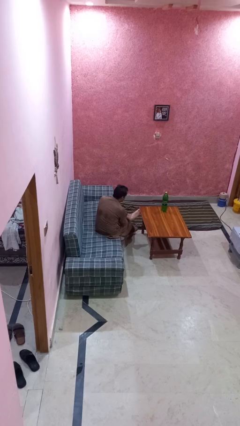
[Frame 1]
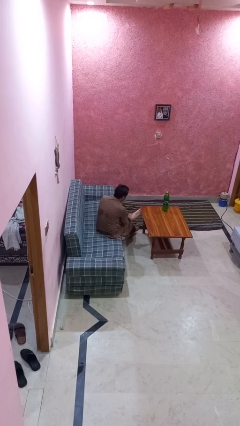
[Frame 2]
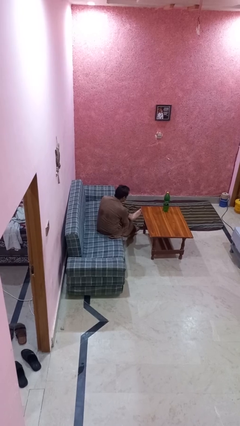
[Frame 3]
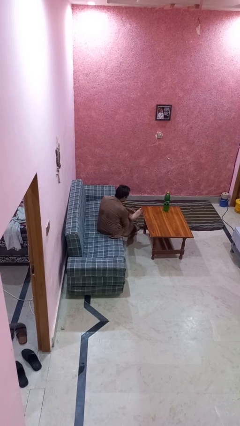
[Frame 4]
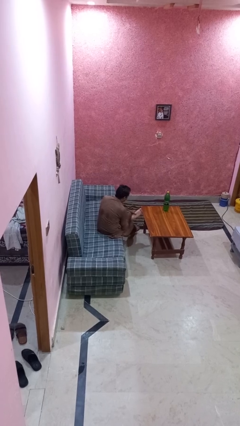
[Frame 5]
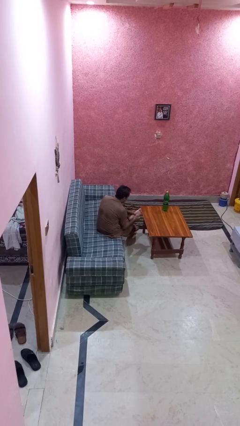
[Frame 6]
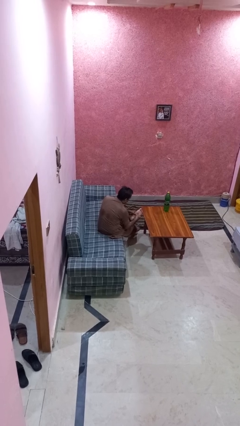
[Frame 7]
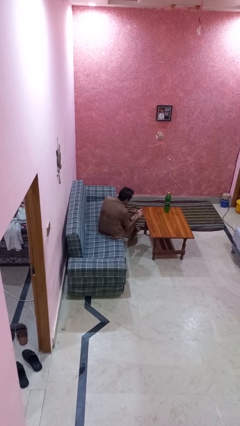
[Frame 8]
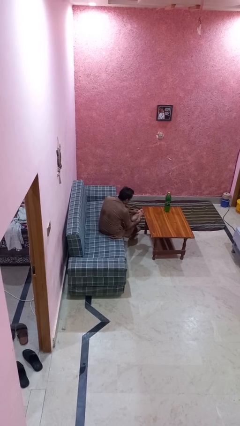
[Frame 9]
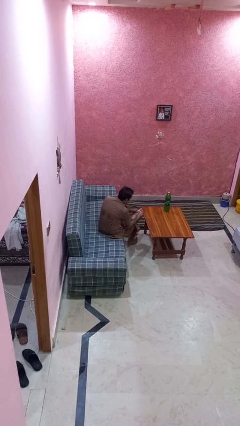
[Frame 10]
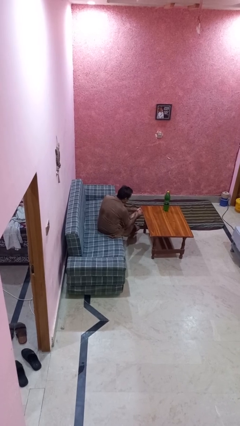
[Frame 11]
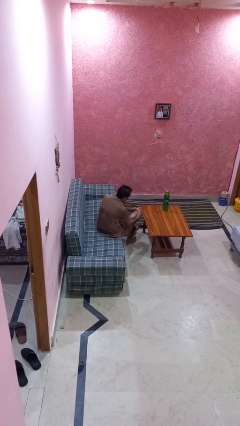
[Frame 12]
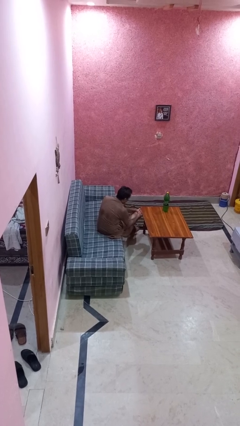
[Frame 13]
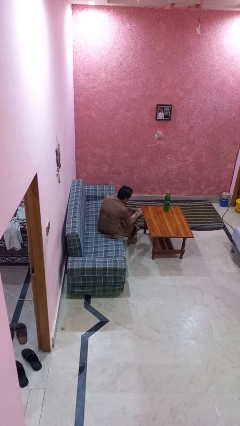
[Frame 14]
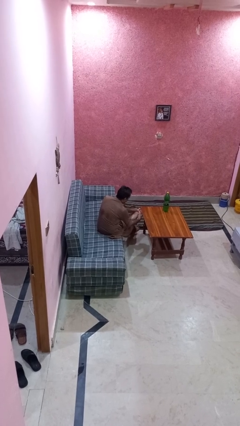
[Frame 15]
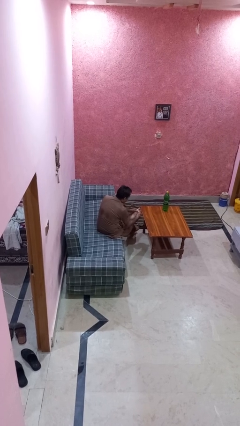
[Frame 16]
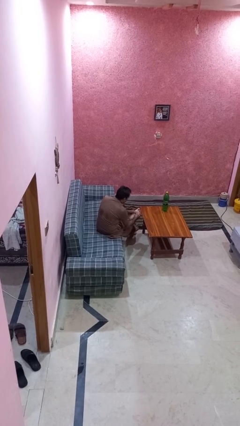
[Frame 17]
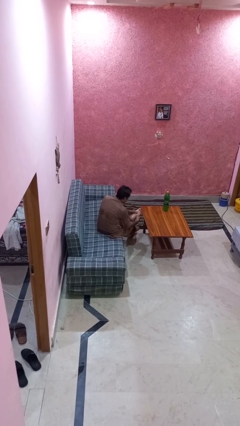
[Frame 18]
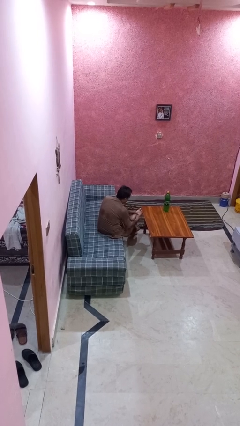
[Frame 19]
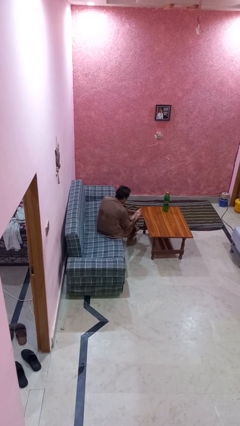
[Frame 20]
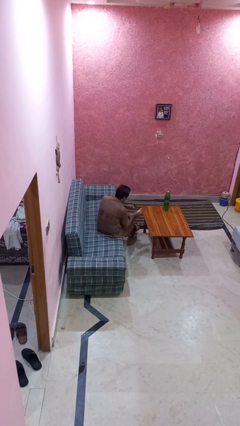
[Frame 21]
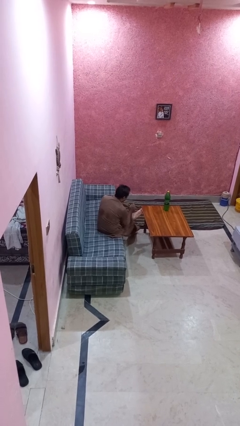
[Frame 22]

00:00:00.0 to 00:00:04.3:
person rubs foot

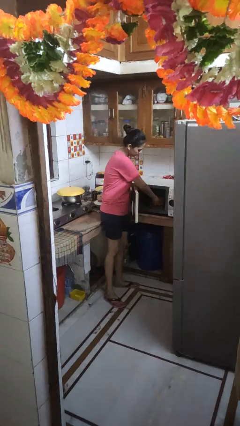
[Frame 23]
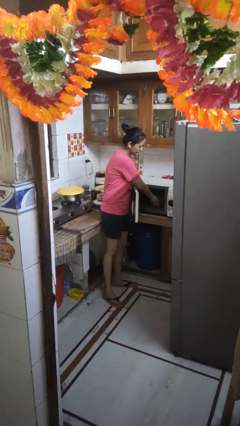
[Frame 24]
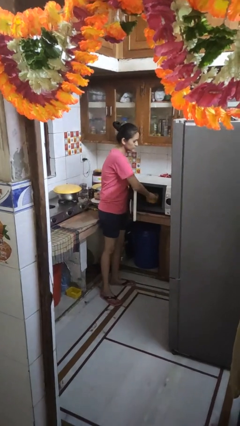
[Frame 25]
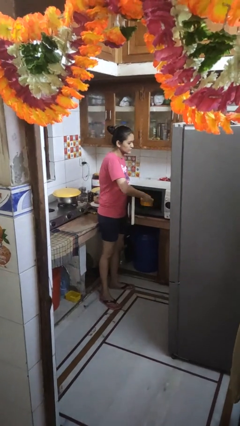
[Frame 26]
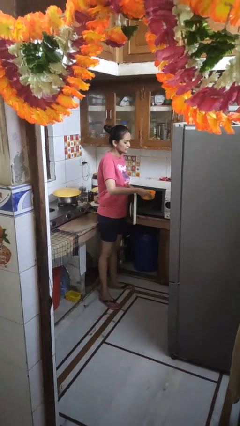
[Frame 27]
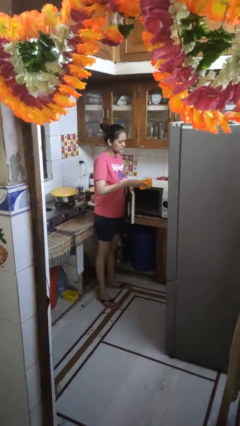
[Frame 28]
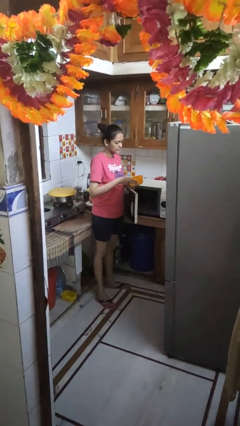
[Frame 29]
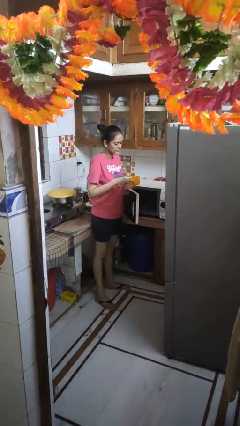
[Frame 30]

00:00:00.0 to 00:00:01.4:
person takes object from microwave

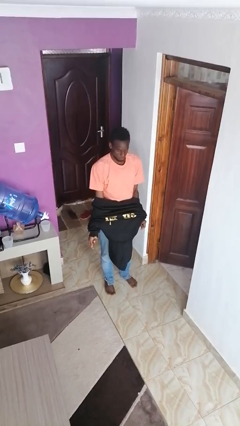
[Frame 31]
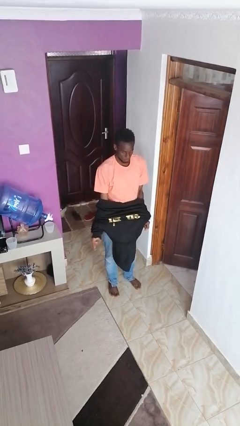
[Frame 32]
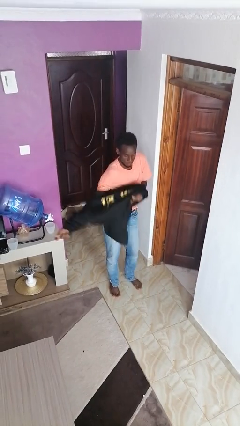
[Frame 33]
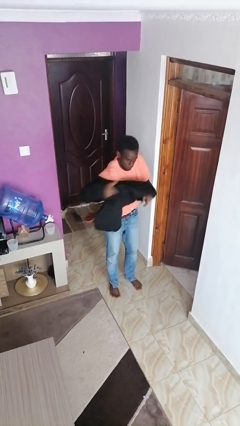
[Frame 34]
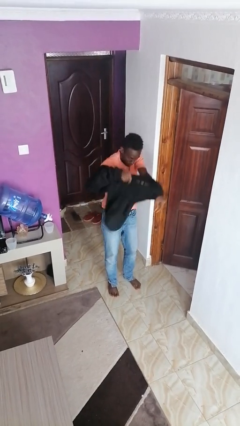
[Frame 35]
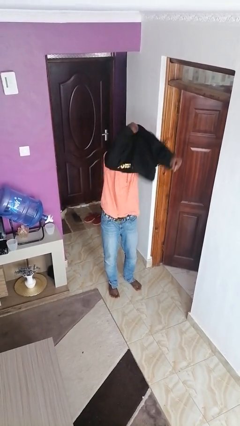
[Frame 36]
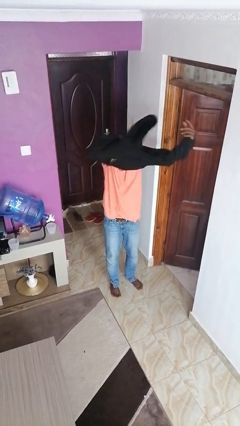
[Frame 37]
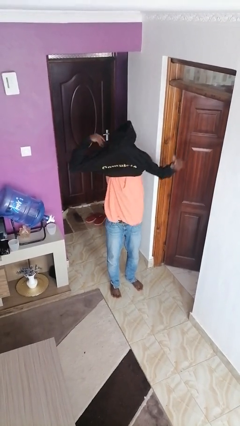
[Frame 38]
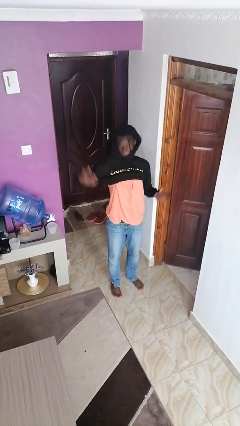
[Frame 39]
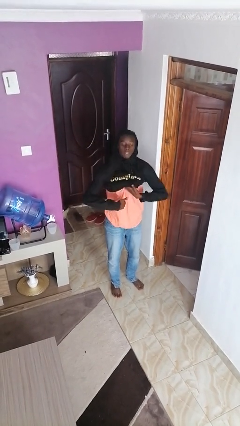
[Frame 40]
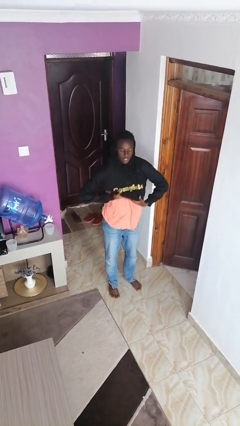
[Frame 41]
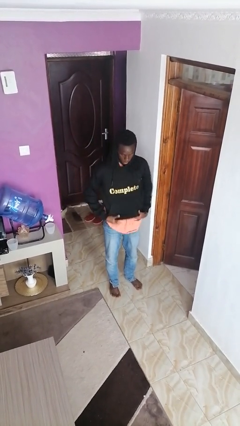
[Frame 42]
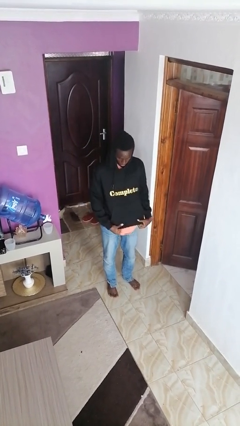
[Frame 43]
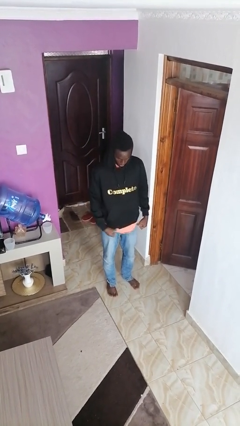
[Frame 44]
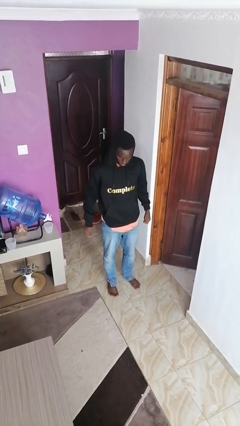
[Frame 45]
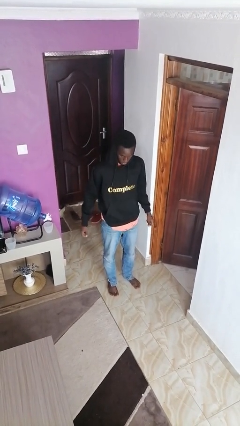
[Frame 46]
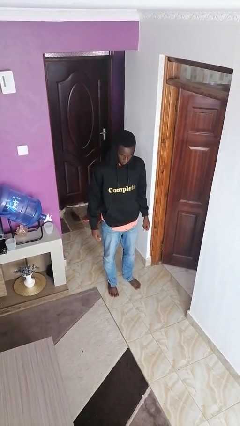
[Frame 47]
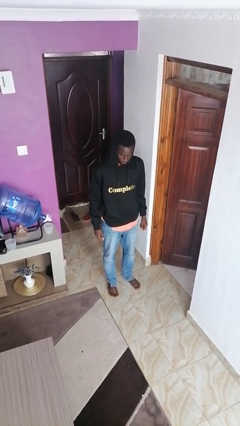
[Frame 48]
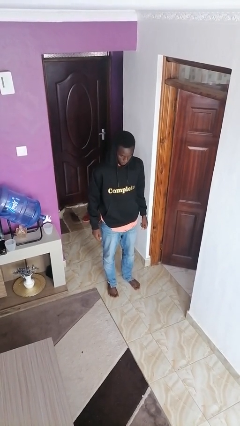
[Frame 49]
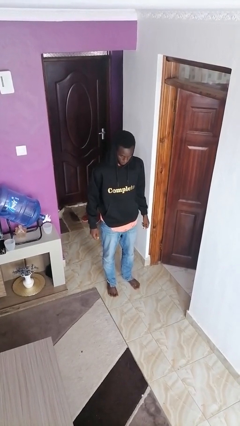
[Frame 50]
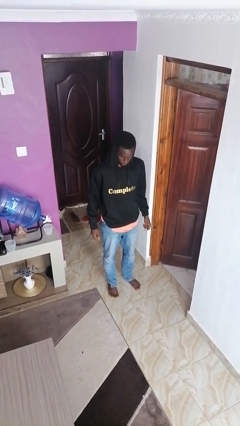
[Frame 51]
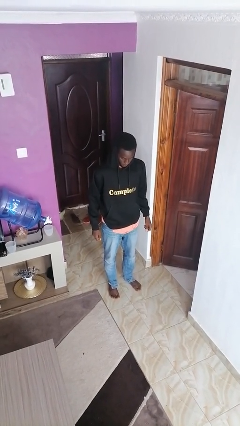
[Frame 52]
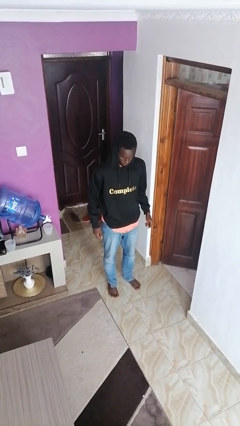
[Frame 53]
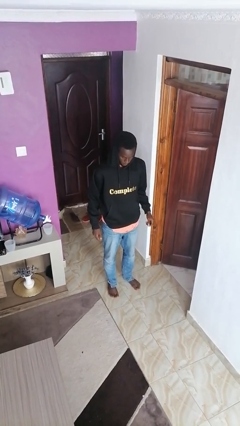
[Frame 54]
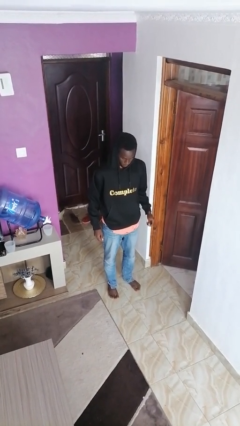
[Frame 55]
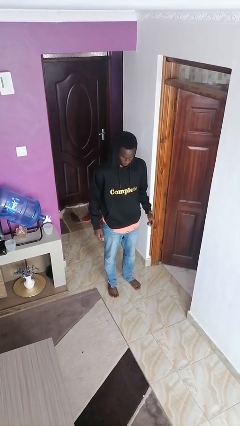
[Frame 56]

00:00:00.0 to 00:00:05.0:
person puts on hoodie

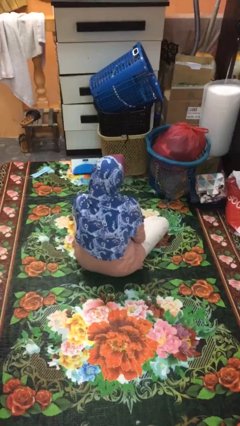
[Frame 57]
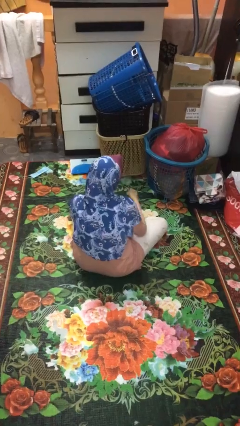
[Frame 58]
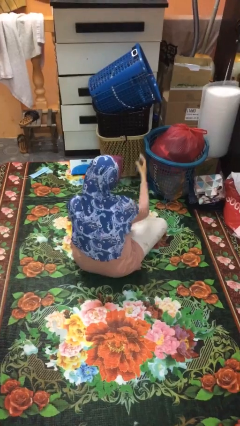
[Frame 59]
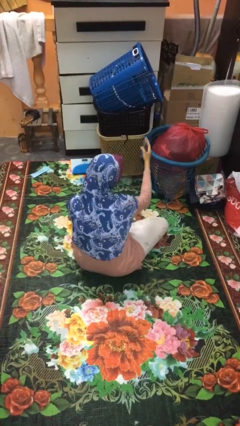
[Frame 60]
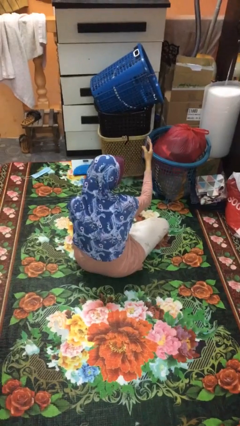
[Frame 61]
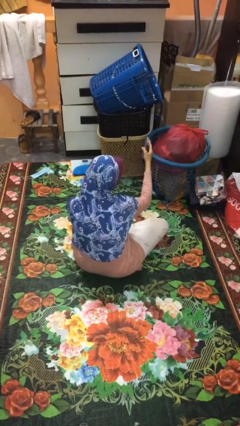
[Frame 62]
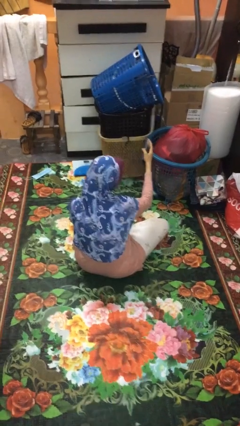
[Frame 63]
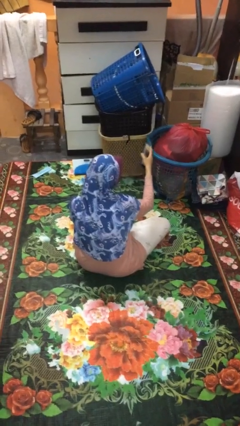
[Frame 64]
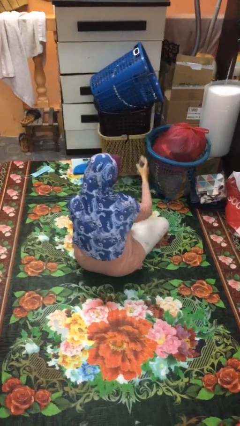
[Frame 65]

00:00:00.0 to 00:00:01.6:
person uses television remote

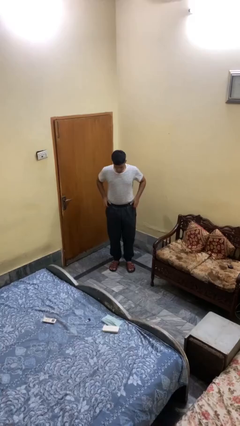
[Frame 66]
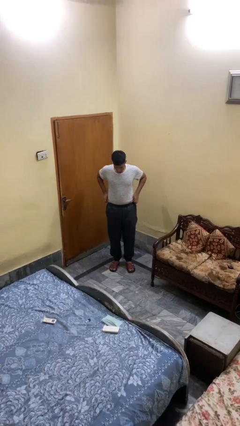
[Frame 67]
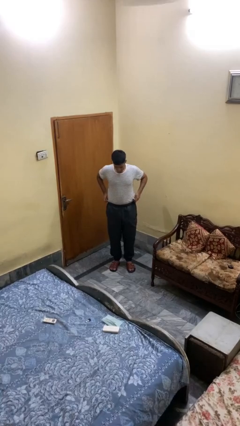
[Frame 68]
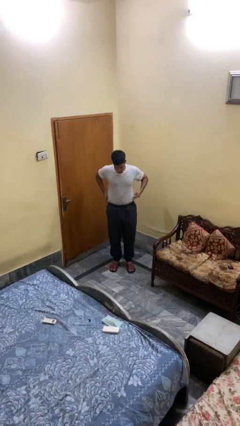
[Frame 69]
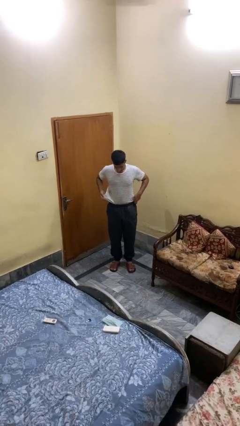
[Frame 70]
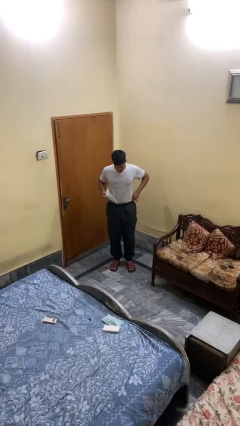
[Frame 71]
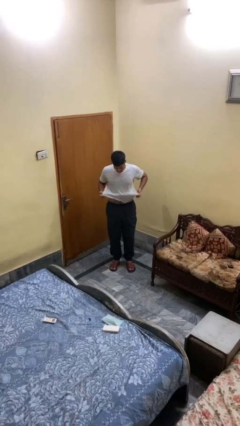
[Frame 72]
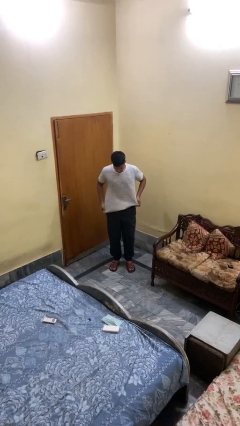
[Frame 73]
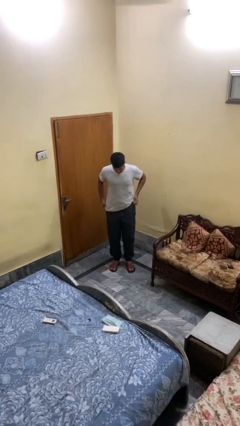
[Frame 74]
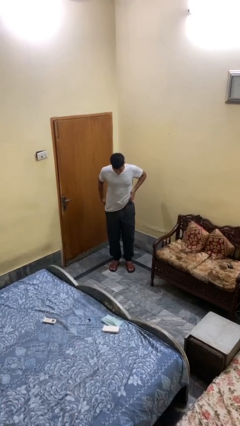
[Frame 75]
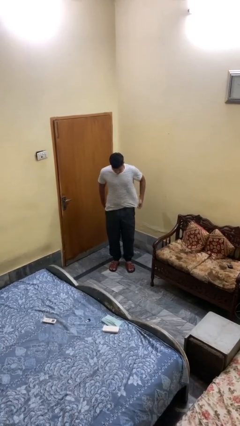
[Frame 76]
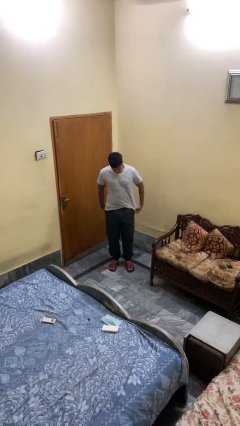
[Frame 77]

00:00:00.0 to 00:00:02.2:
person untucks shirt

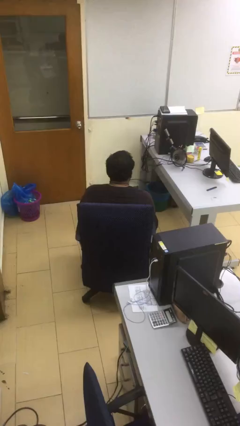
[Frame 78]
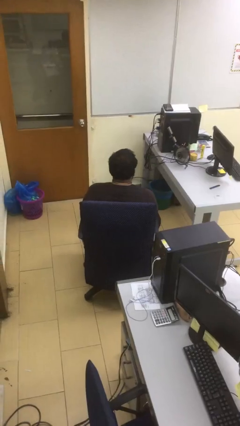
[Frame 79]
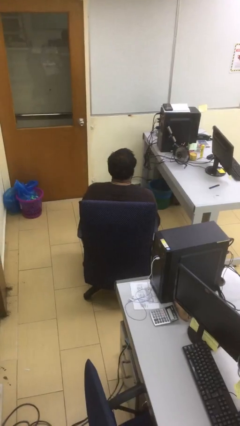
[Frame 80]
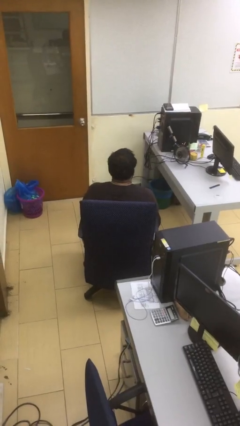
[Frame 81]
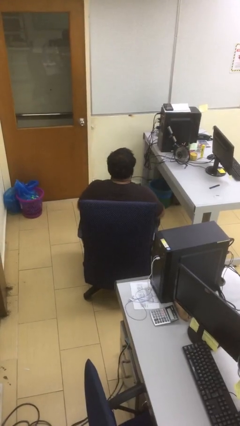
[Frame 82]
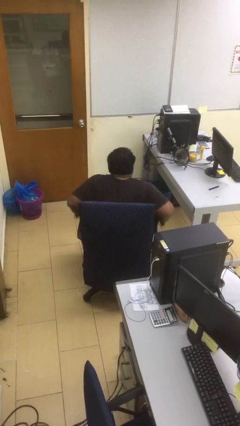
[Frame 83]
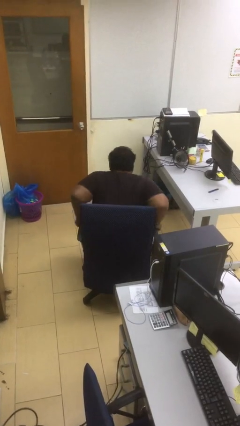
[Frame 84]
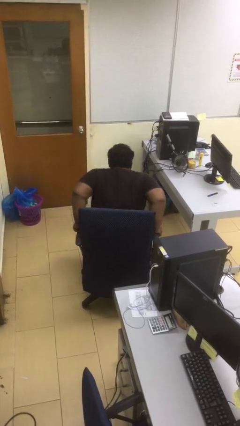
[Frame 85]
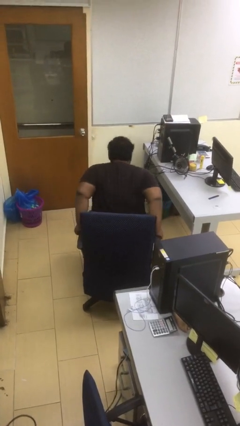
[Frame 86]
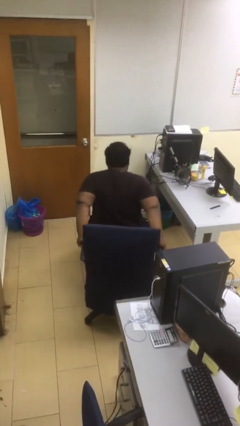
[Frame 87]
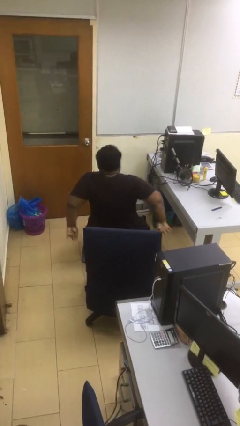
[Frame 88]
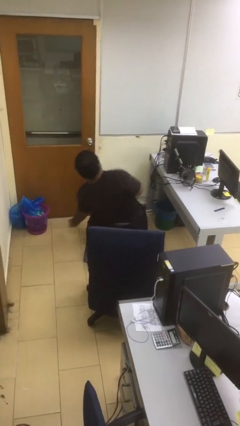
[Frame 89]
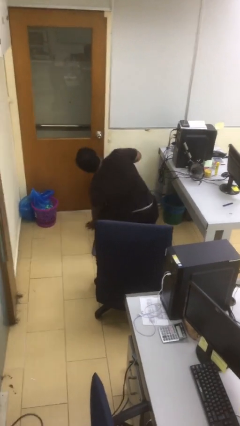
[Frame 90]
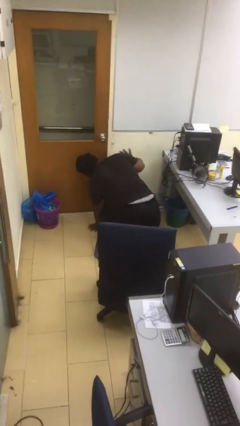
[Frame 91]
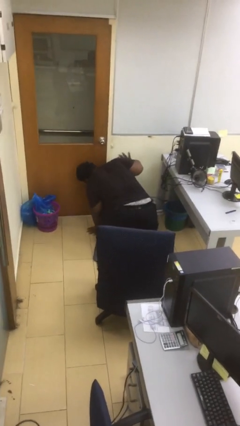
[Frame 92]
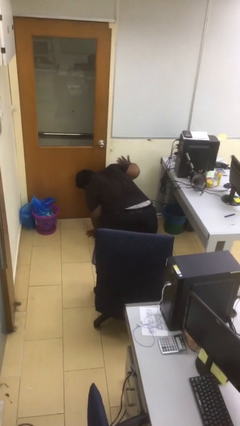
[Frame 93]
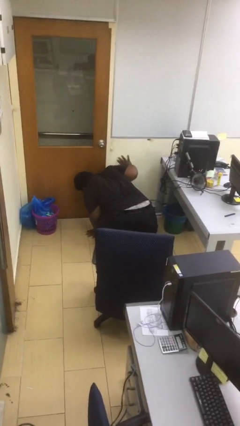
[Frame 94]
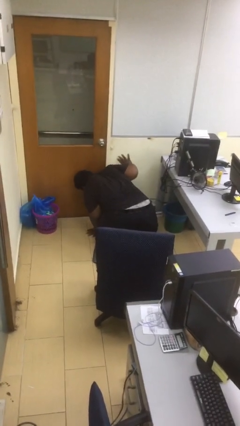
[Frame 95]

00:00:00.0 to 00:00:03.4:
person falls from chair
